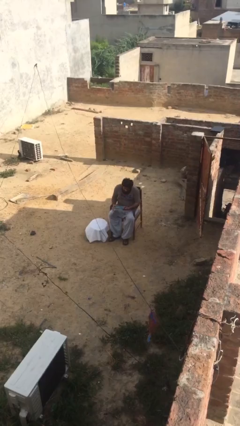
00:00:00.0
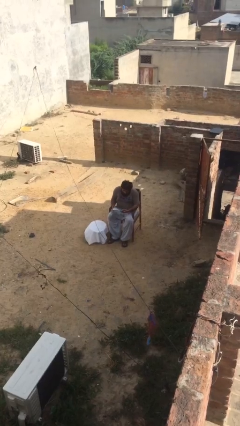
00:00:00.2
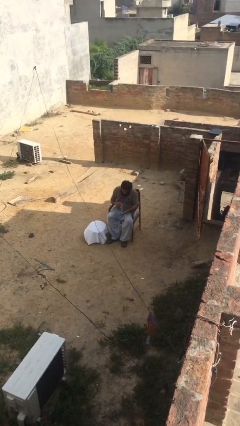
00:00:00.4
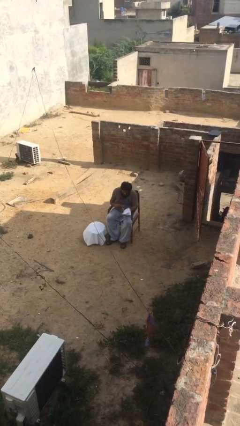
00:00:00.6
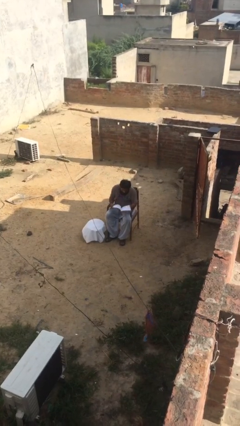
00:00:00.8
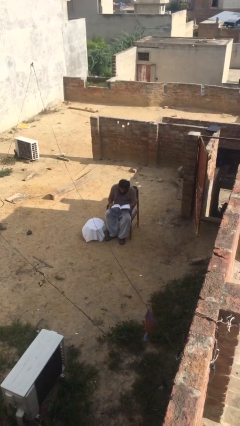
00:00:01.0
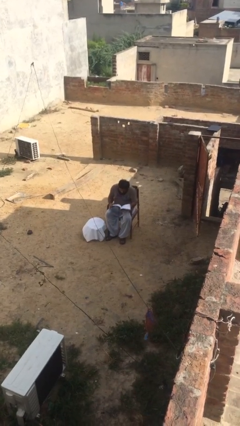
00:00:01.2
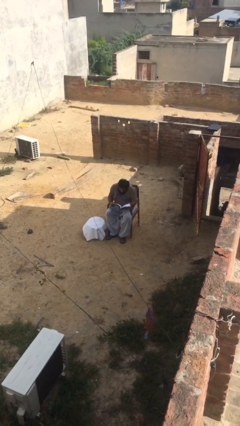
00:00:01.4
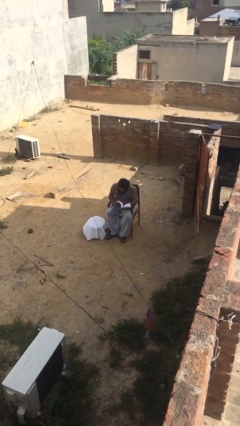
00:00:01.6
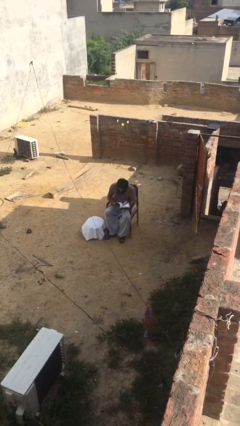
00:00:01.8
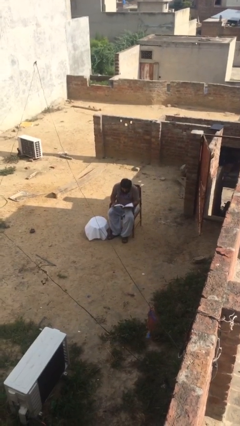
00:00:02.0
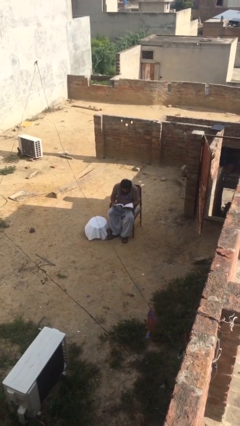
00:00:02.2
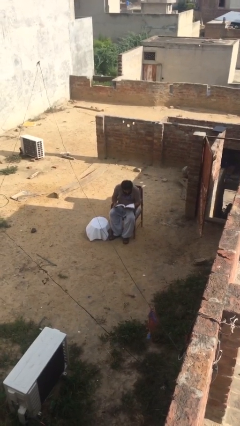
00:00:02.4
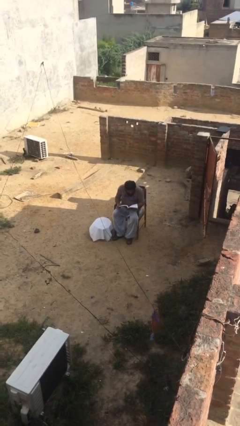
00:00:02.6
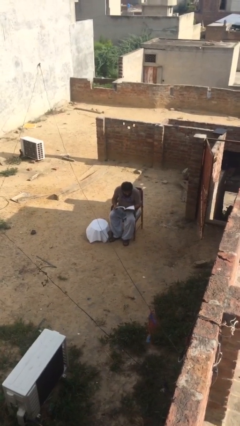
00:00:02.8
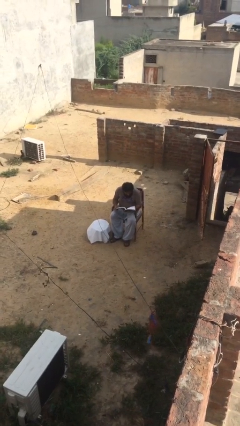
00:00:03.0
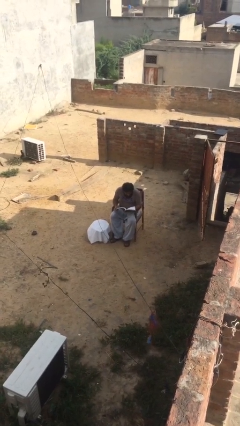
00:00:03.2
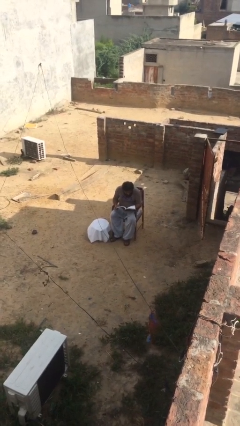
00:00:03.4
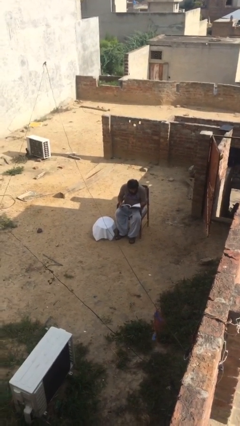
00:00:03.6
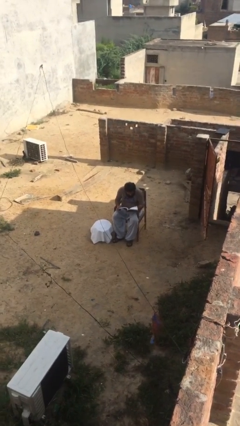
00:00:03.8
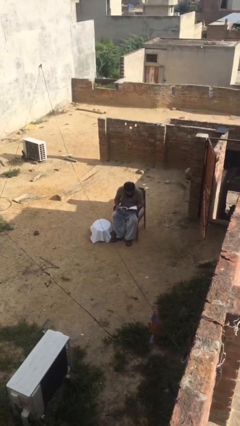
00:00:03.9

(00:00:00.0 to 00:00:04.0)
person reads document

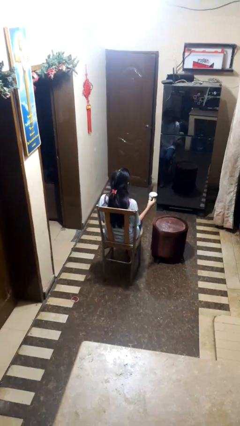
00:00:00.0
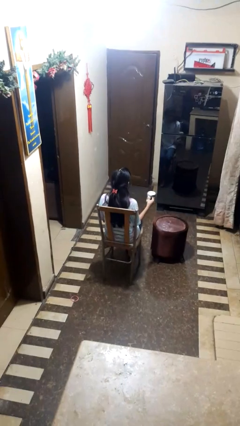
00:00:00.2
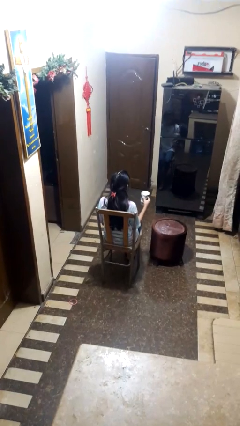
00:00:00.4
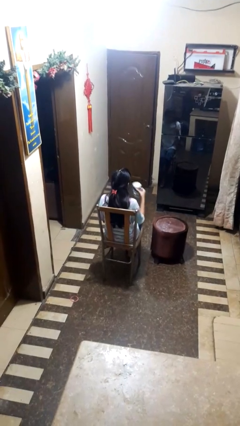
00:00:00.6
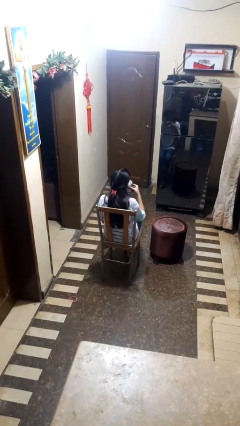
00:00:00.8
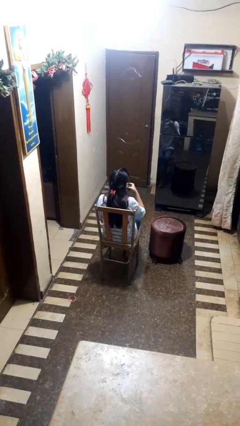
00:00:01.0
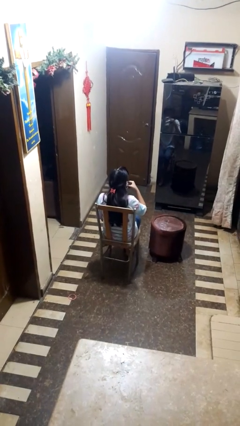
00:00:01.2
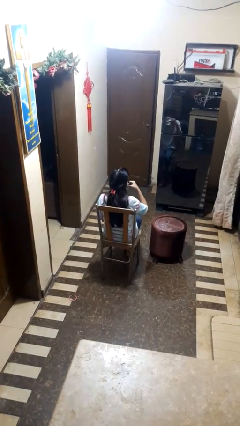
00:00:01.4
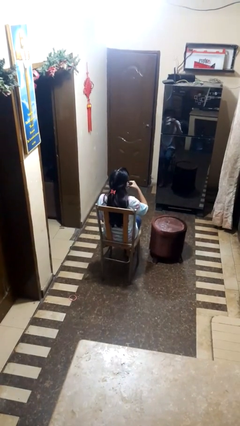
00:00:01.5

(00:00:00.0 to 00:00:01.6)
person drinks from mug

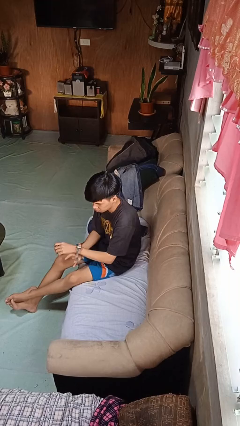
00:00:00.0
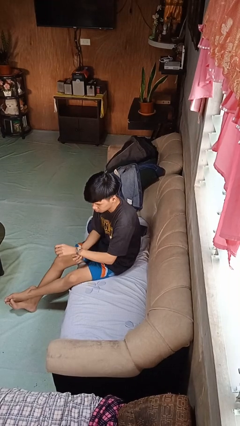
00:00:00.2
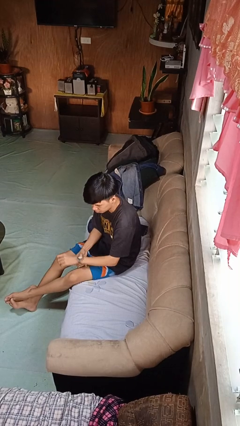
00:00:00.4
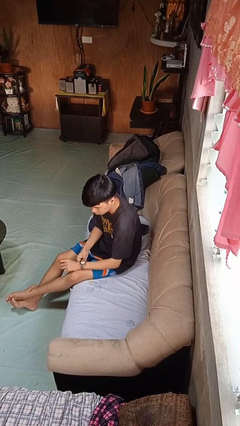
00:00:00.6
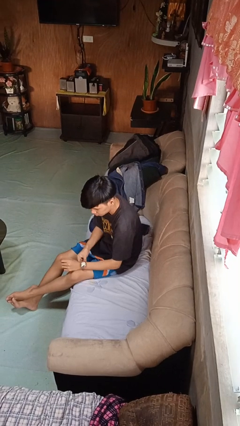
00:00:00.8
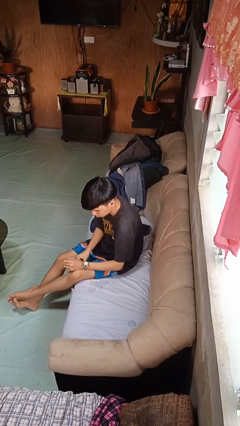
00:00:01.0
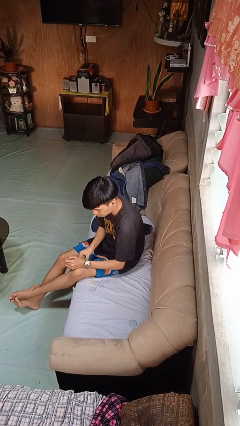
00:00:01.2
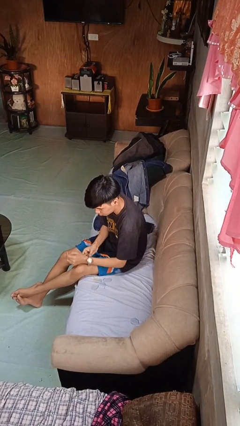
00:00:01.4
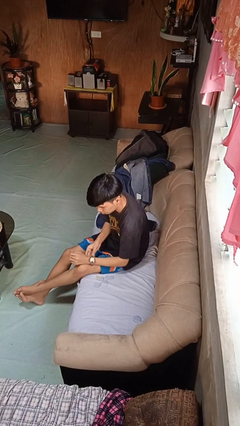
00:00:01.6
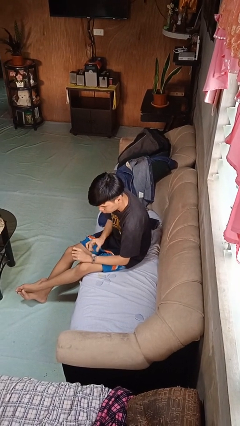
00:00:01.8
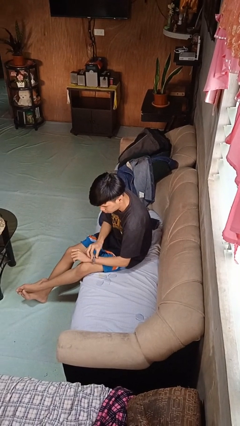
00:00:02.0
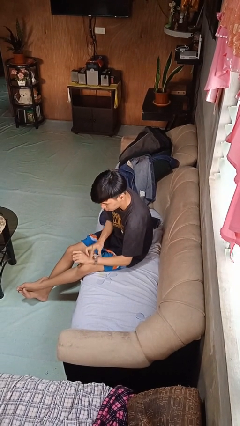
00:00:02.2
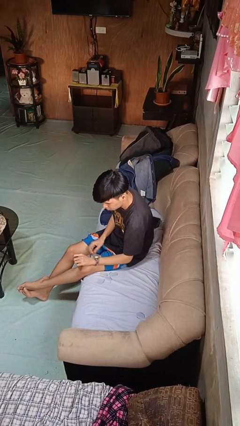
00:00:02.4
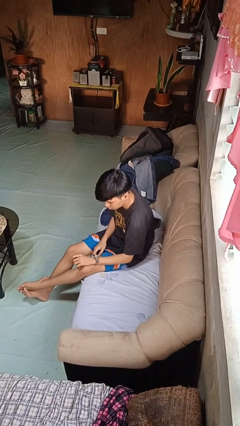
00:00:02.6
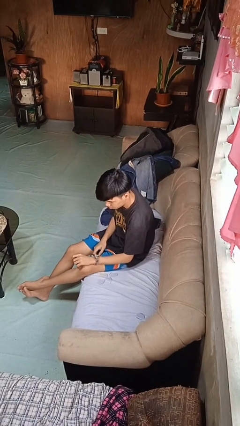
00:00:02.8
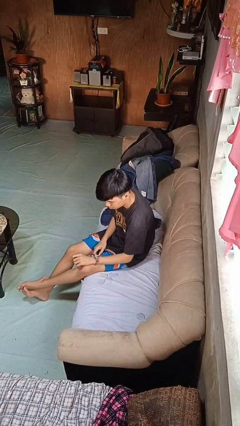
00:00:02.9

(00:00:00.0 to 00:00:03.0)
person puts on wristwatch

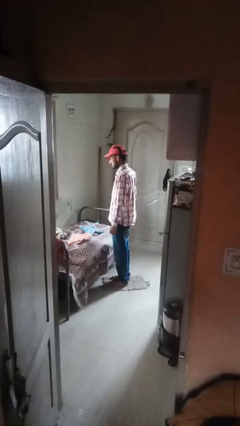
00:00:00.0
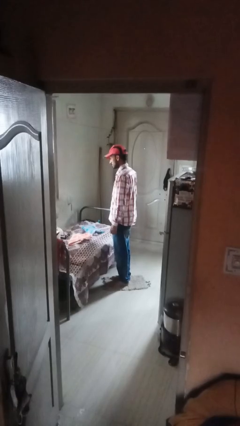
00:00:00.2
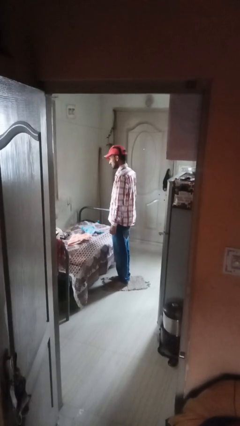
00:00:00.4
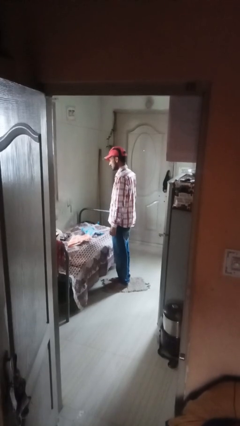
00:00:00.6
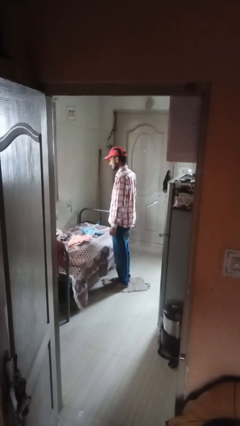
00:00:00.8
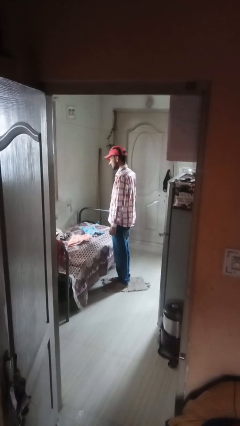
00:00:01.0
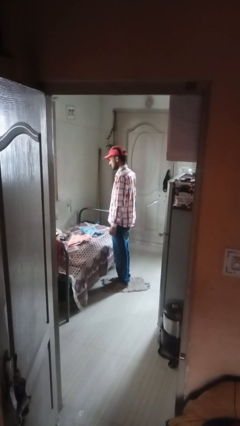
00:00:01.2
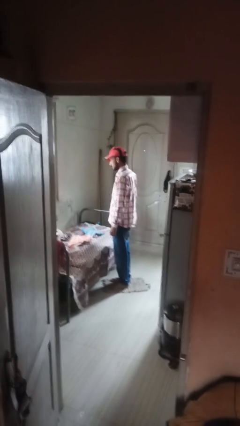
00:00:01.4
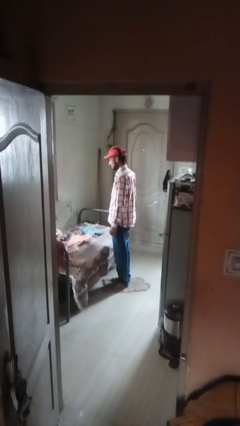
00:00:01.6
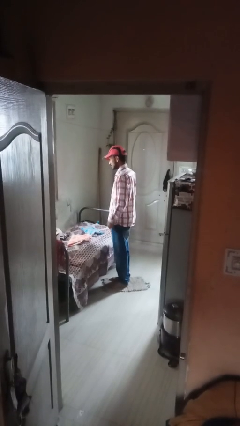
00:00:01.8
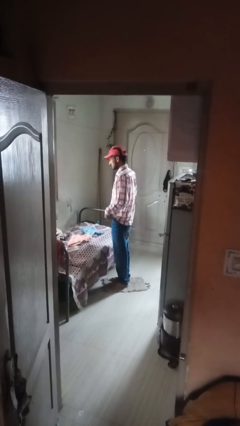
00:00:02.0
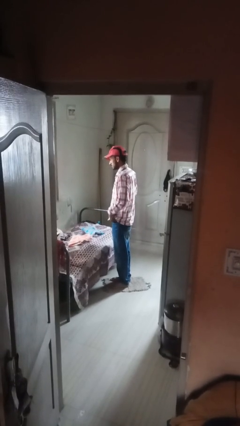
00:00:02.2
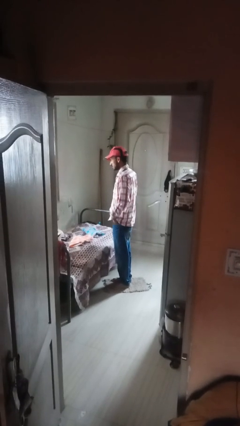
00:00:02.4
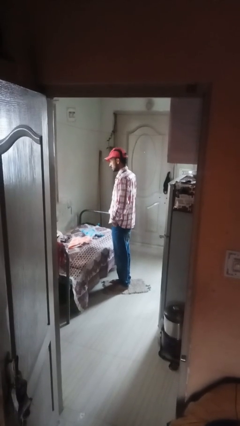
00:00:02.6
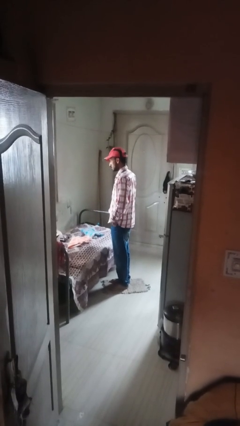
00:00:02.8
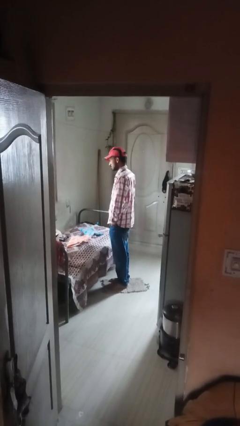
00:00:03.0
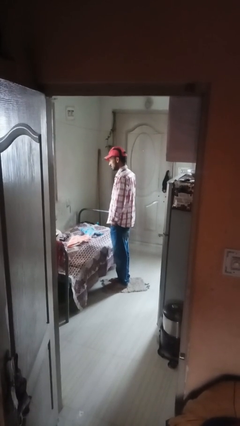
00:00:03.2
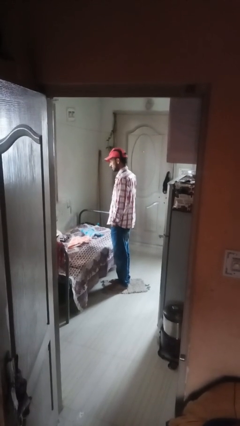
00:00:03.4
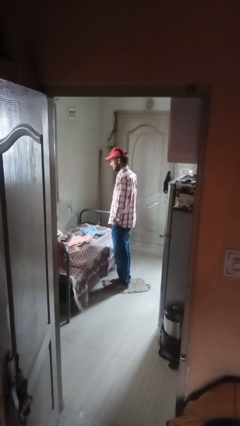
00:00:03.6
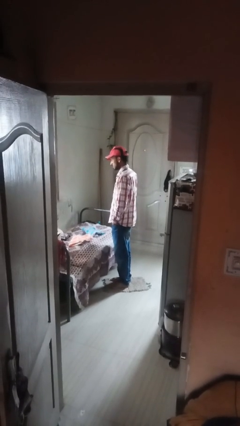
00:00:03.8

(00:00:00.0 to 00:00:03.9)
person puts hands in back pockets

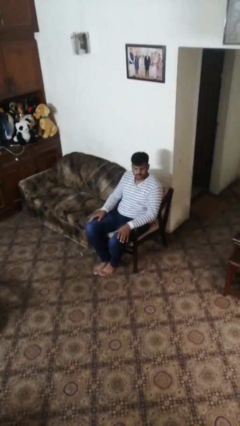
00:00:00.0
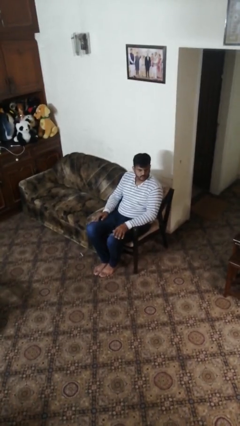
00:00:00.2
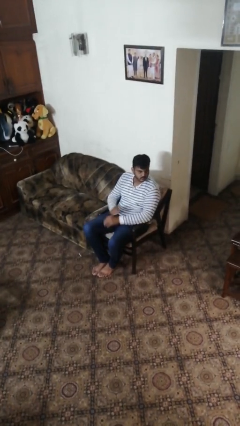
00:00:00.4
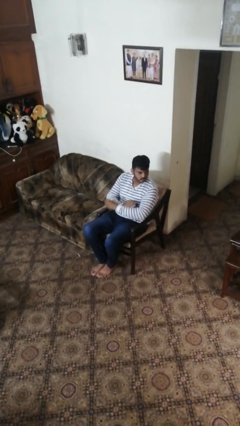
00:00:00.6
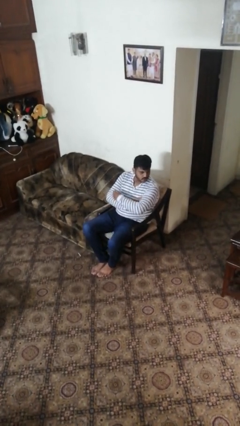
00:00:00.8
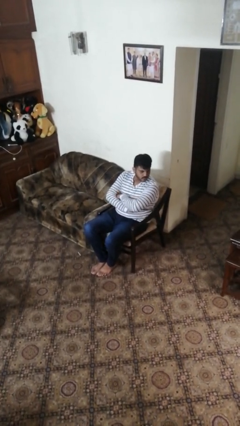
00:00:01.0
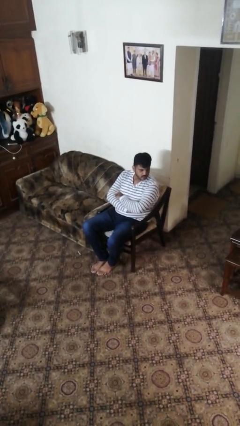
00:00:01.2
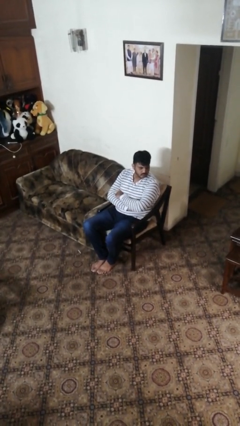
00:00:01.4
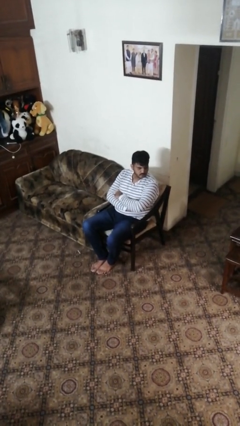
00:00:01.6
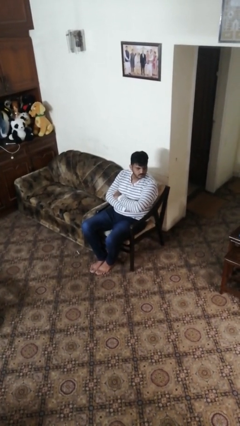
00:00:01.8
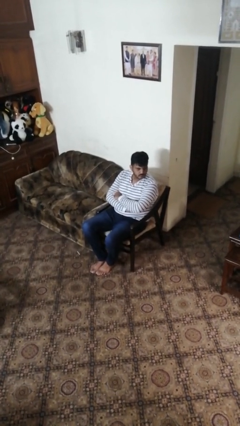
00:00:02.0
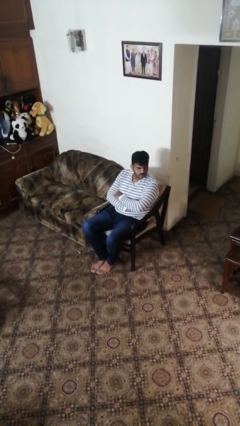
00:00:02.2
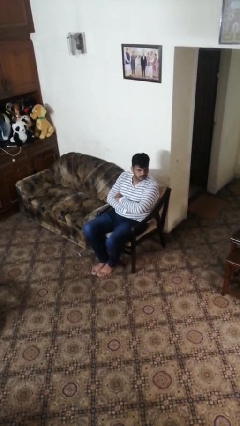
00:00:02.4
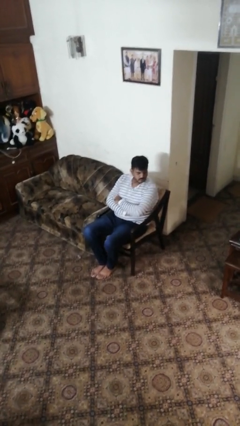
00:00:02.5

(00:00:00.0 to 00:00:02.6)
person crosses arms

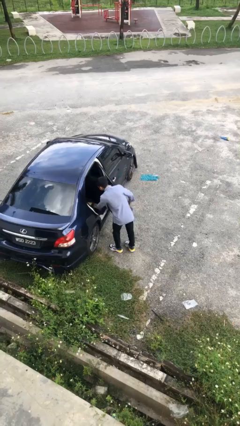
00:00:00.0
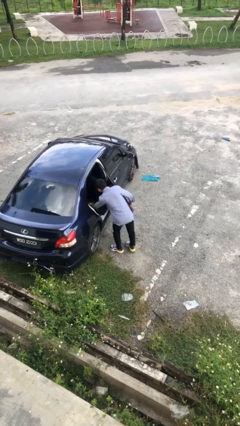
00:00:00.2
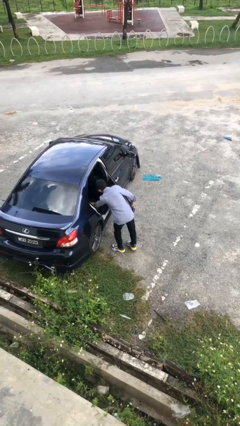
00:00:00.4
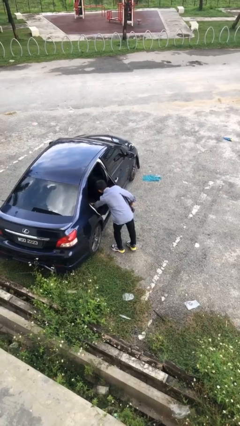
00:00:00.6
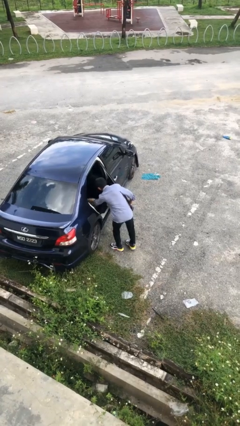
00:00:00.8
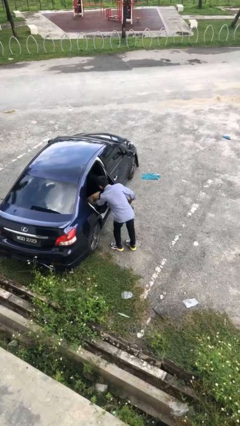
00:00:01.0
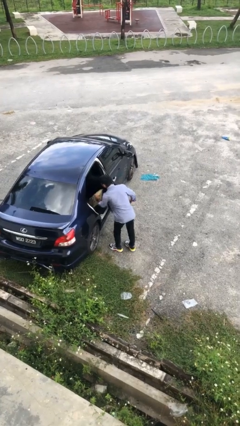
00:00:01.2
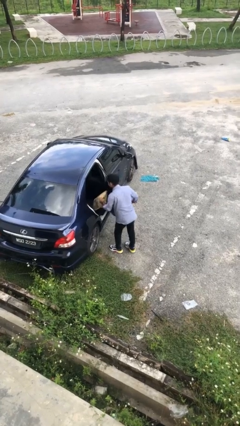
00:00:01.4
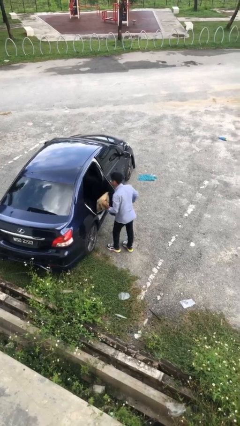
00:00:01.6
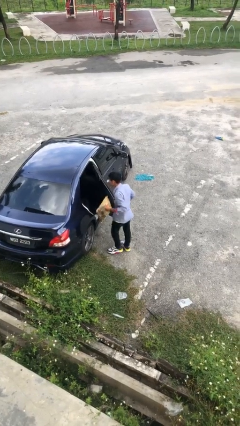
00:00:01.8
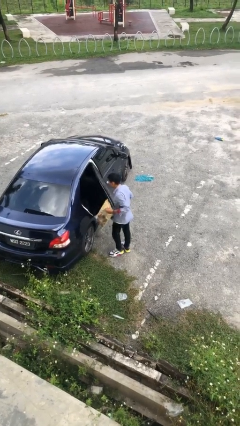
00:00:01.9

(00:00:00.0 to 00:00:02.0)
person unloads car
